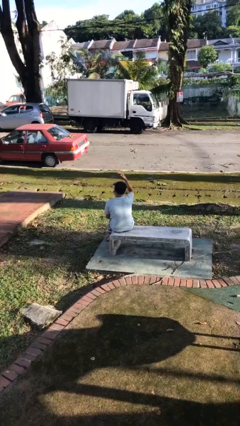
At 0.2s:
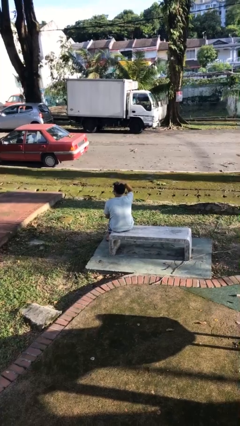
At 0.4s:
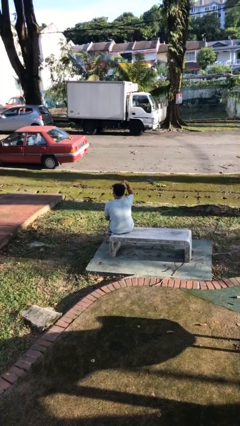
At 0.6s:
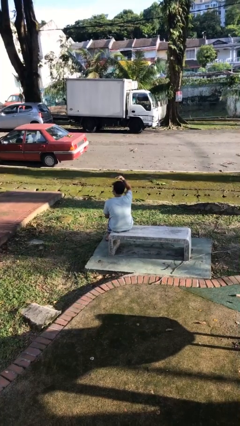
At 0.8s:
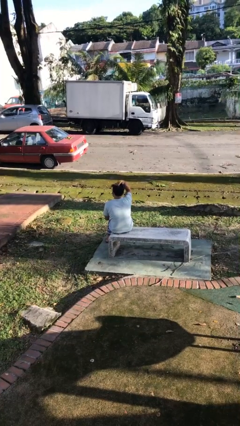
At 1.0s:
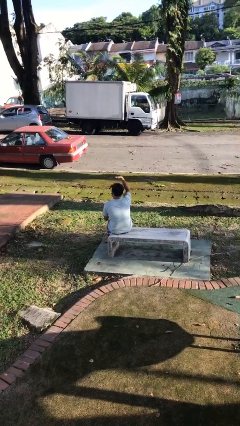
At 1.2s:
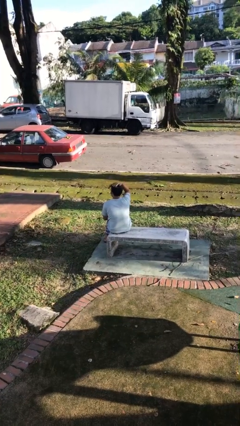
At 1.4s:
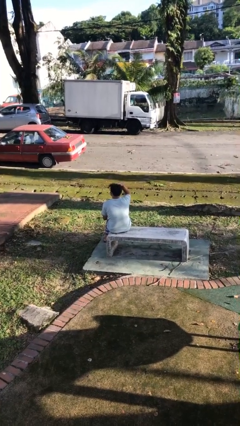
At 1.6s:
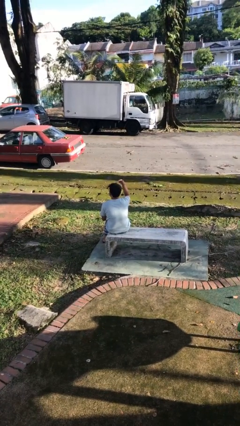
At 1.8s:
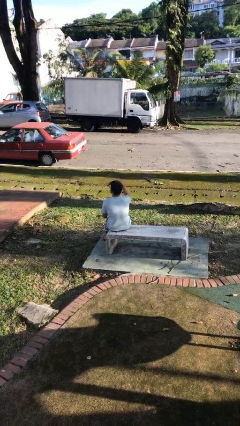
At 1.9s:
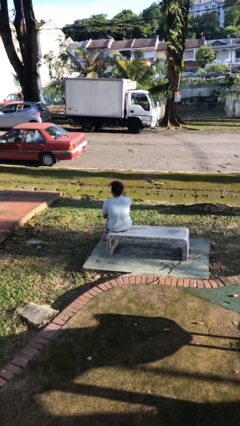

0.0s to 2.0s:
person pats head

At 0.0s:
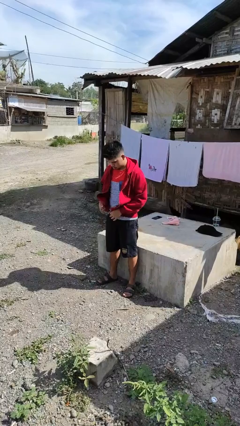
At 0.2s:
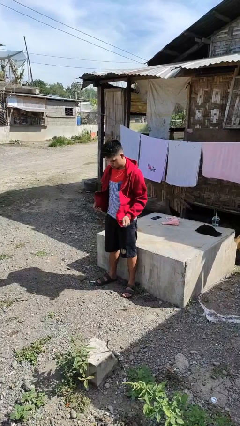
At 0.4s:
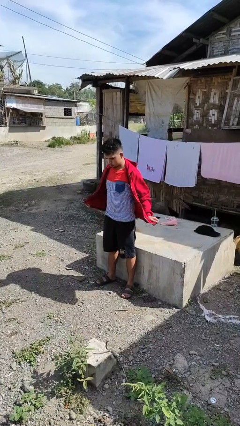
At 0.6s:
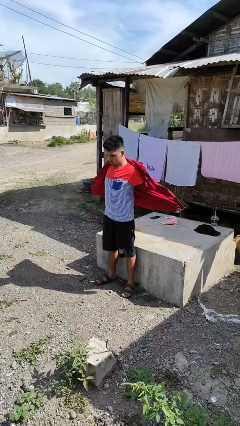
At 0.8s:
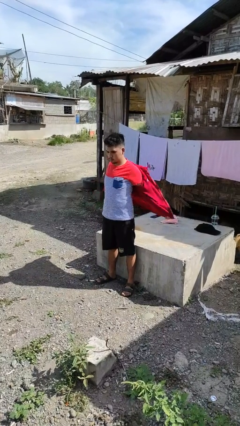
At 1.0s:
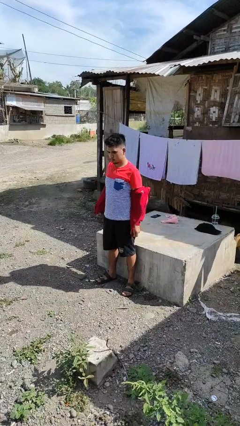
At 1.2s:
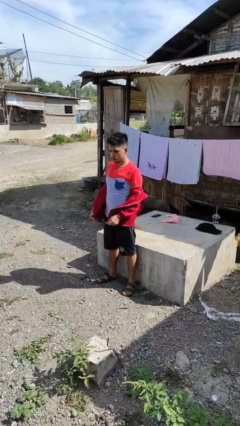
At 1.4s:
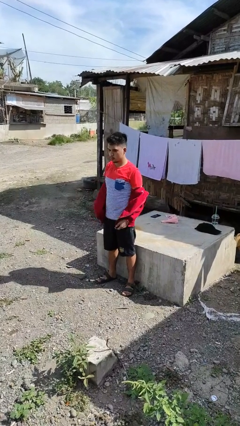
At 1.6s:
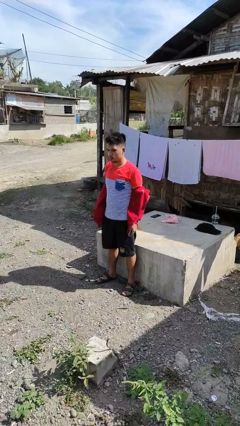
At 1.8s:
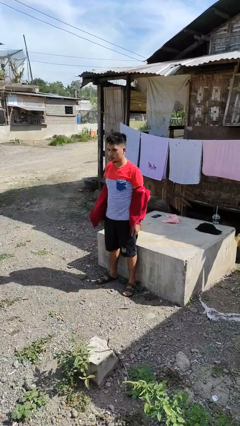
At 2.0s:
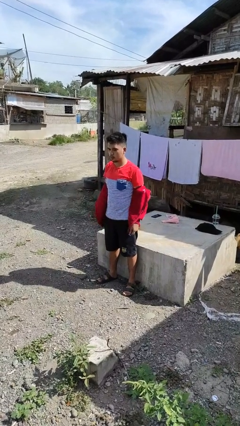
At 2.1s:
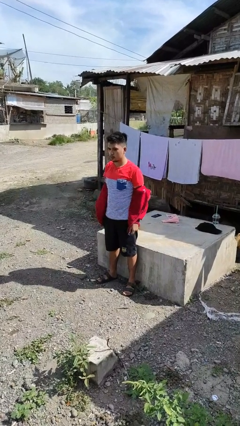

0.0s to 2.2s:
person takes off jacket

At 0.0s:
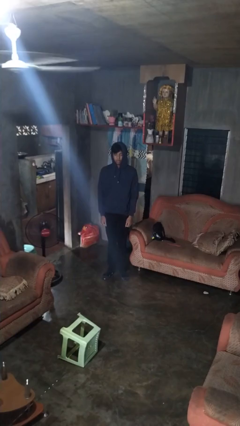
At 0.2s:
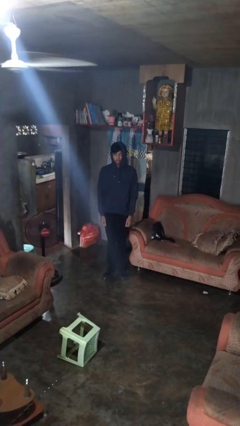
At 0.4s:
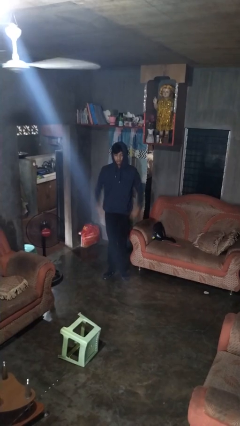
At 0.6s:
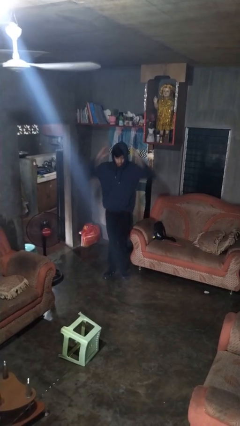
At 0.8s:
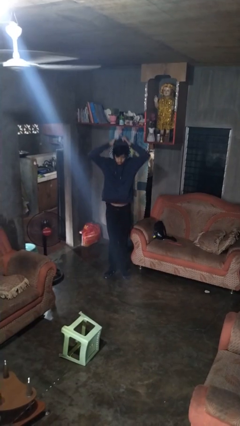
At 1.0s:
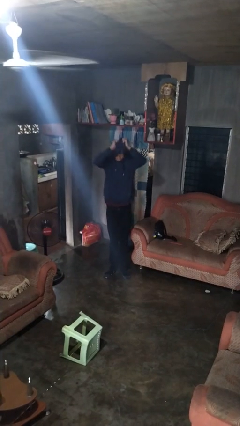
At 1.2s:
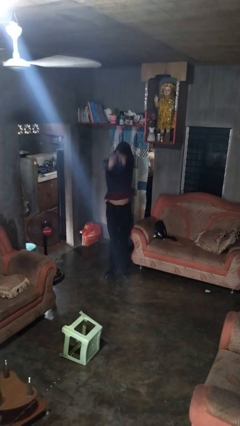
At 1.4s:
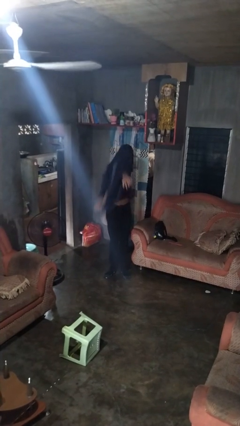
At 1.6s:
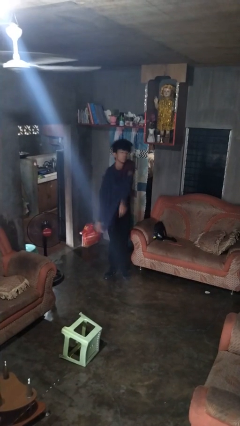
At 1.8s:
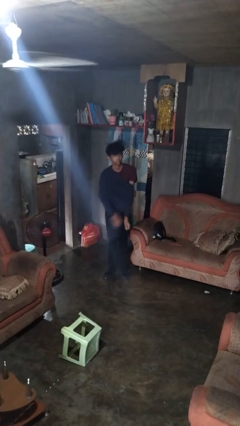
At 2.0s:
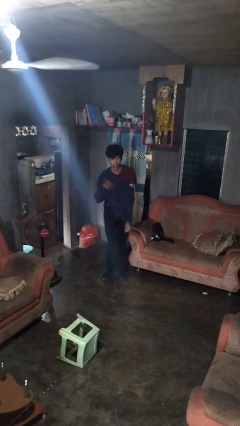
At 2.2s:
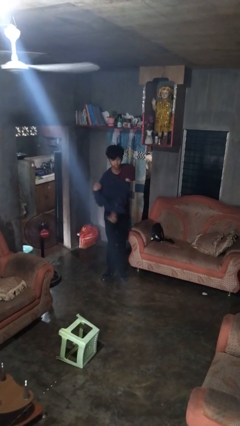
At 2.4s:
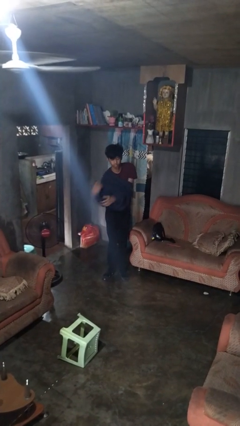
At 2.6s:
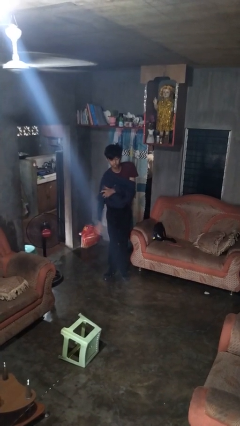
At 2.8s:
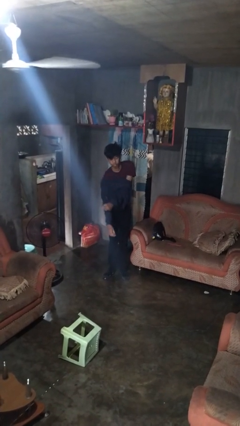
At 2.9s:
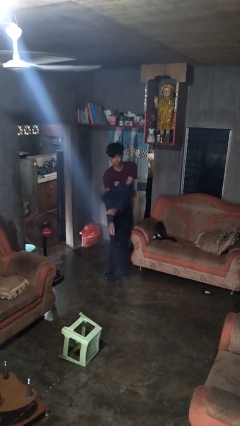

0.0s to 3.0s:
person takes off hoodie

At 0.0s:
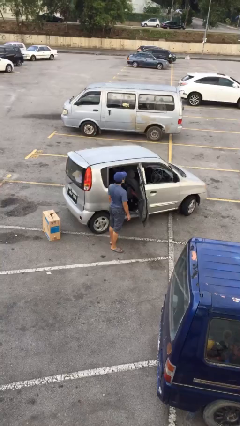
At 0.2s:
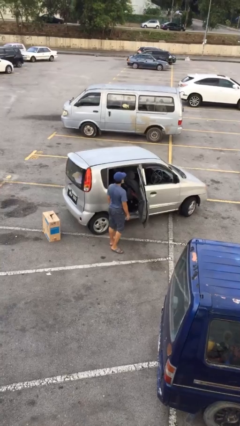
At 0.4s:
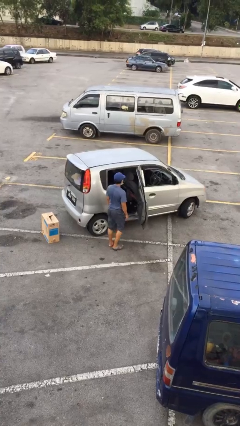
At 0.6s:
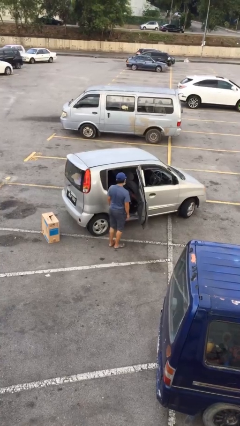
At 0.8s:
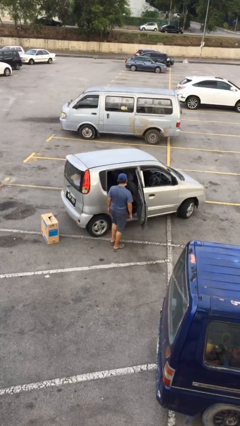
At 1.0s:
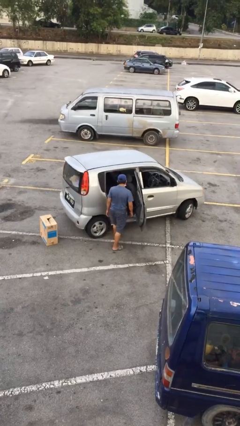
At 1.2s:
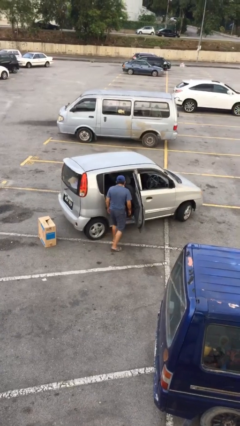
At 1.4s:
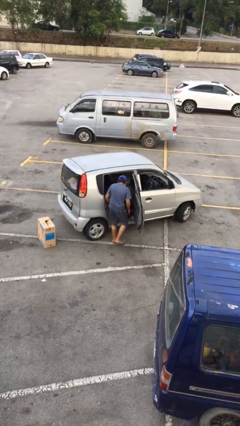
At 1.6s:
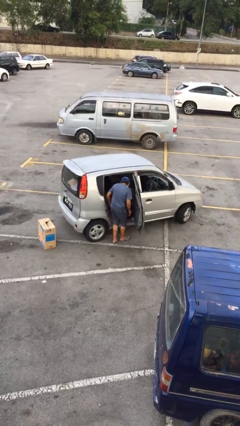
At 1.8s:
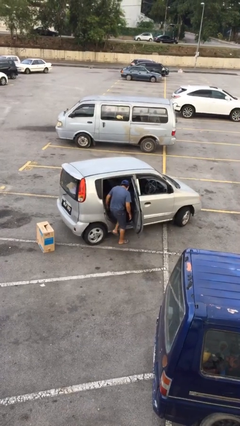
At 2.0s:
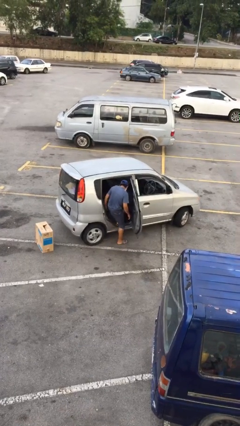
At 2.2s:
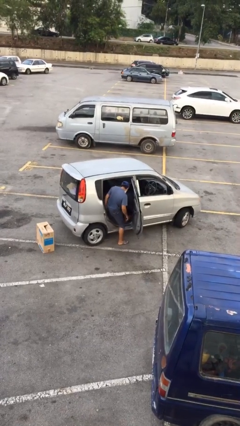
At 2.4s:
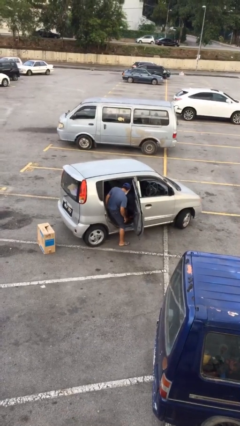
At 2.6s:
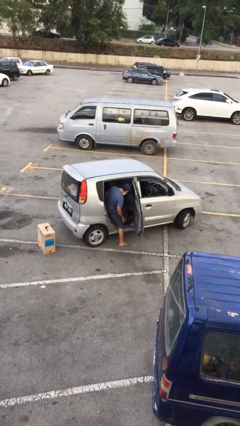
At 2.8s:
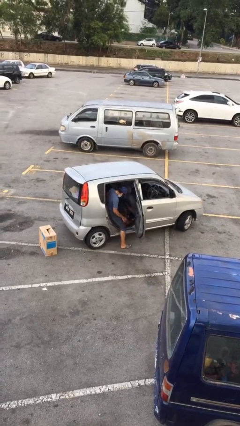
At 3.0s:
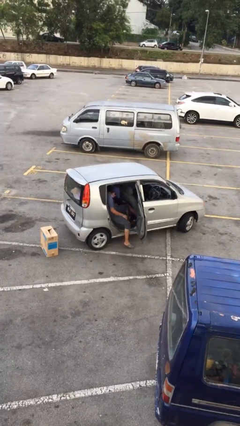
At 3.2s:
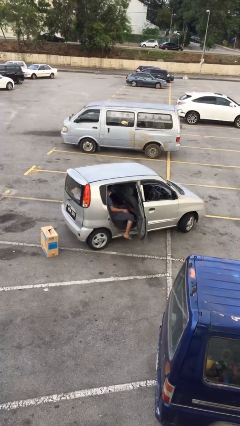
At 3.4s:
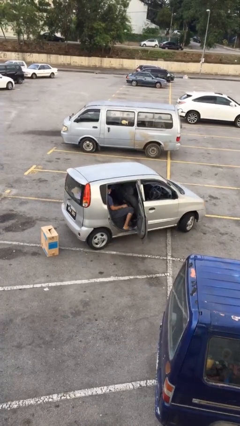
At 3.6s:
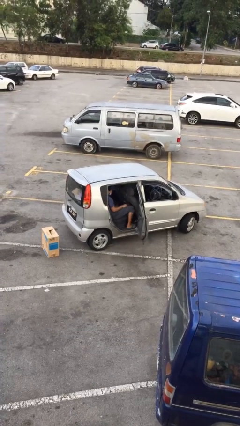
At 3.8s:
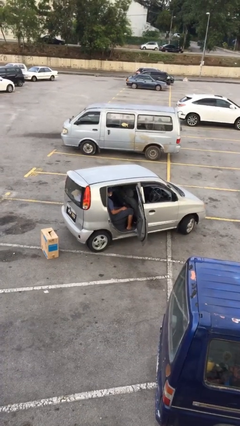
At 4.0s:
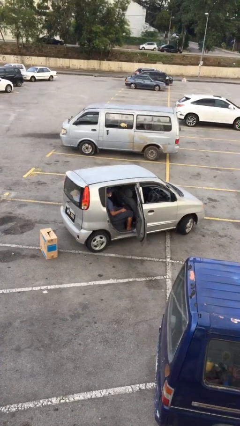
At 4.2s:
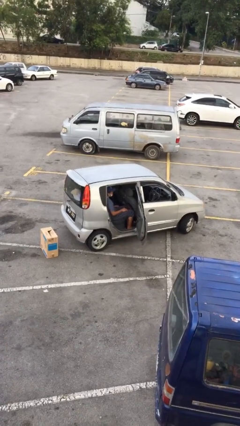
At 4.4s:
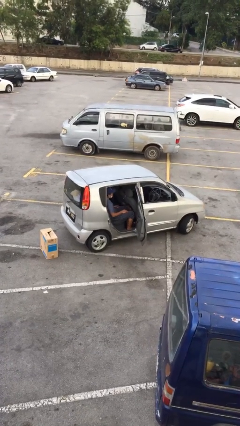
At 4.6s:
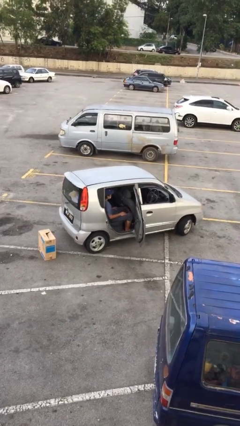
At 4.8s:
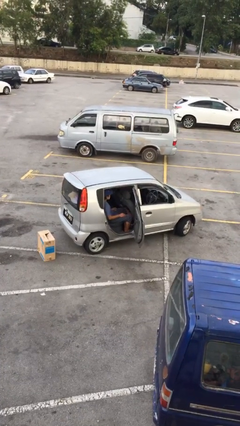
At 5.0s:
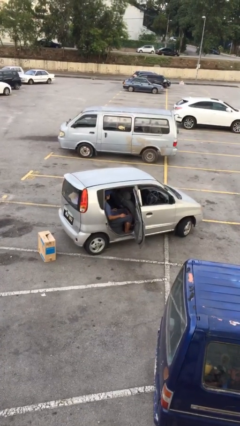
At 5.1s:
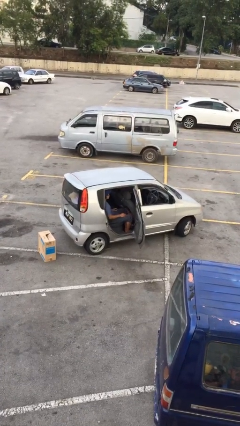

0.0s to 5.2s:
person enters car

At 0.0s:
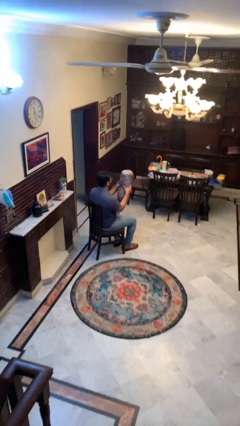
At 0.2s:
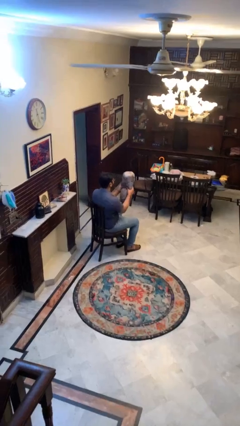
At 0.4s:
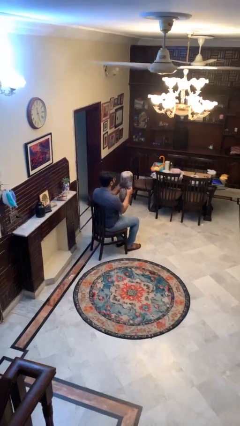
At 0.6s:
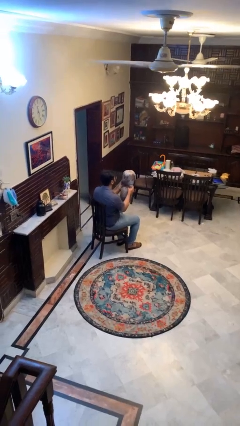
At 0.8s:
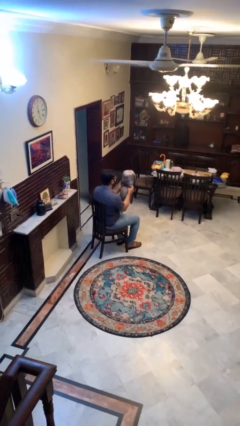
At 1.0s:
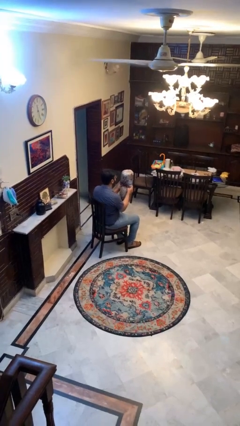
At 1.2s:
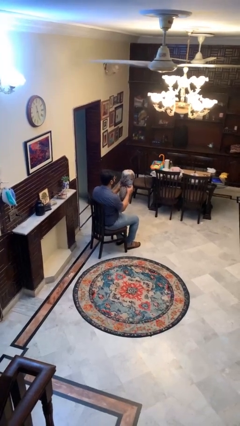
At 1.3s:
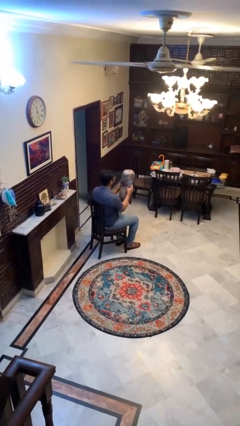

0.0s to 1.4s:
person squeezes object

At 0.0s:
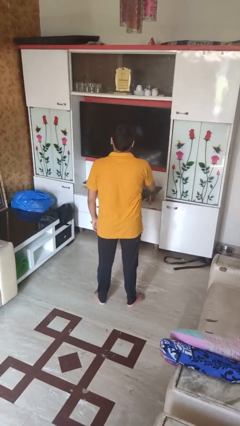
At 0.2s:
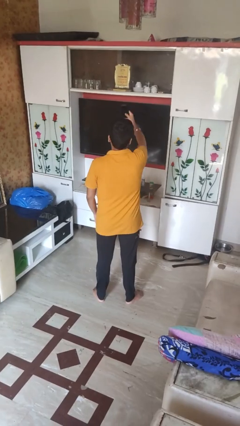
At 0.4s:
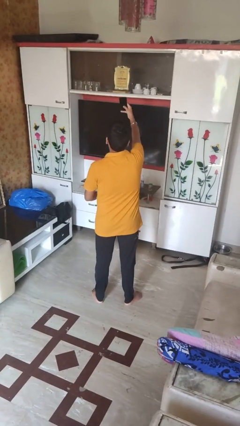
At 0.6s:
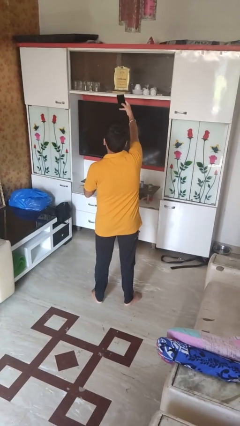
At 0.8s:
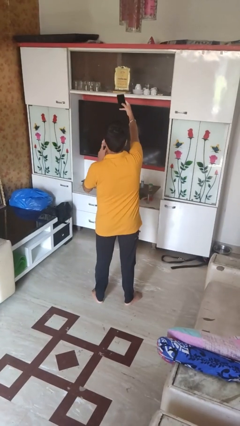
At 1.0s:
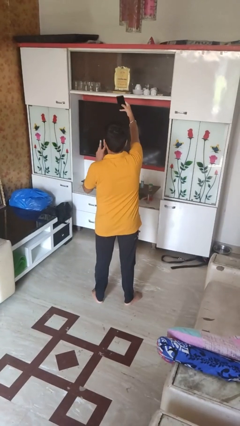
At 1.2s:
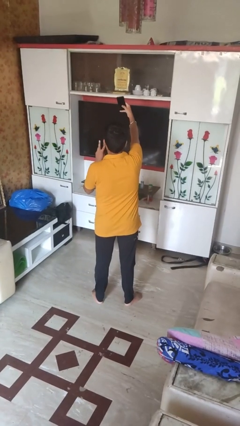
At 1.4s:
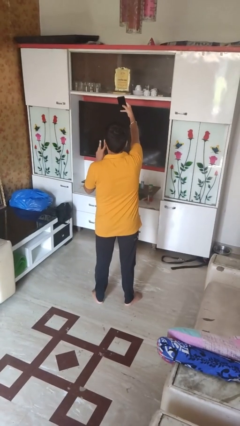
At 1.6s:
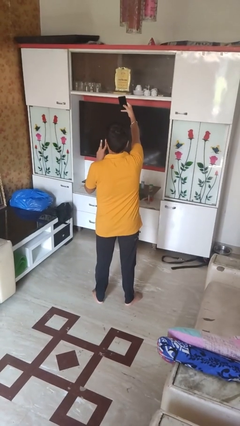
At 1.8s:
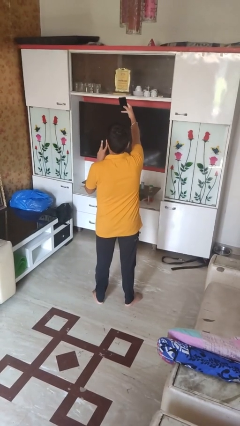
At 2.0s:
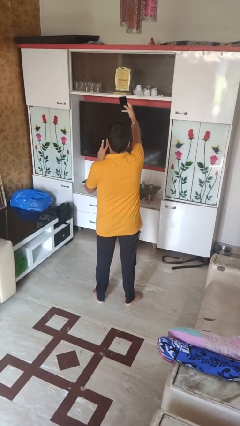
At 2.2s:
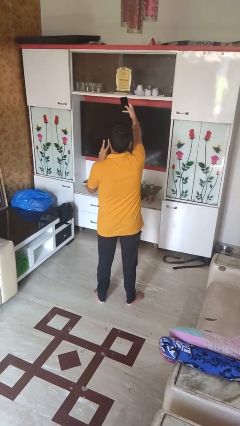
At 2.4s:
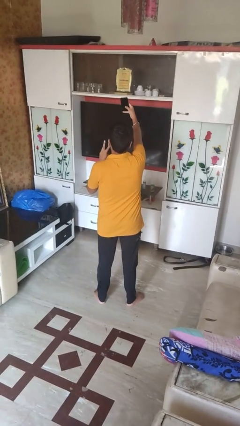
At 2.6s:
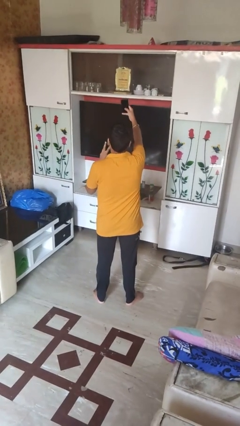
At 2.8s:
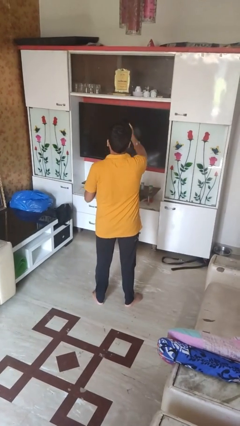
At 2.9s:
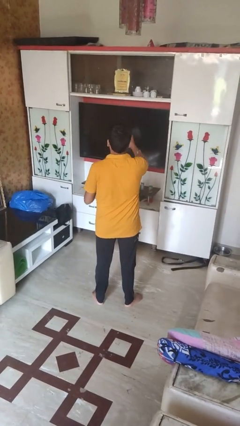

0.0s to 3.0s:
person takes selfie

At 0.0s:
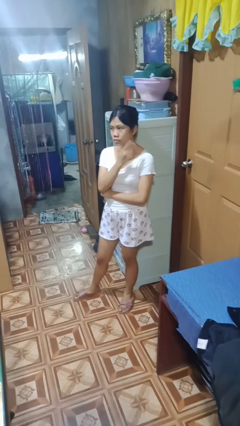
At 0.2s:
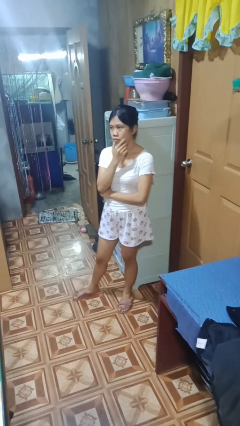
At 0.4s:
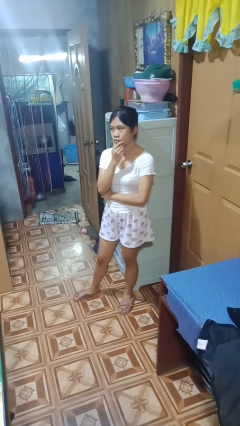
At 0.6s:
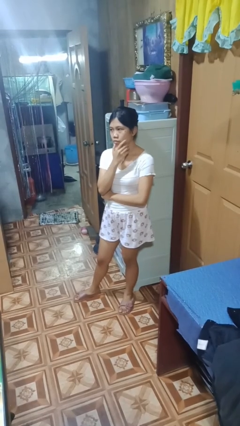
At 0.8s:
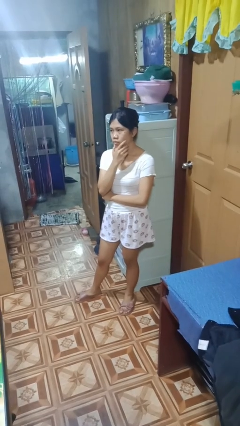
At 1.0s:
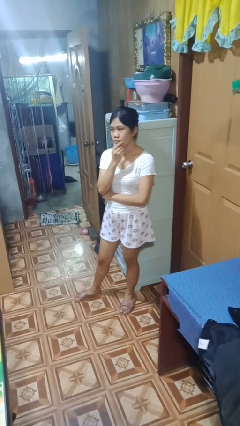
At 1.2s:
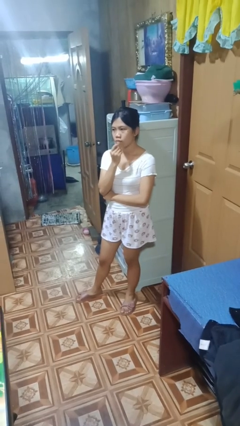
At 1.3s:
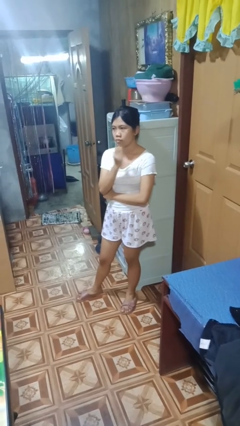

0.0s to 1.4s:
person strokes chin
